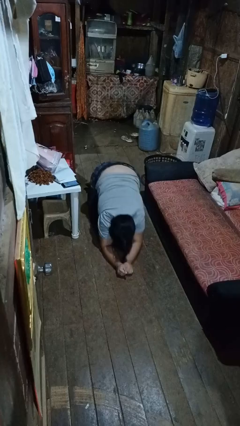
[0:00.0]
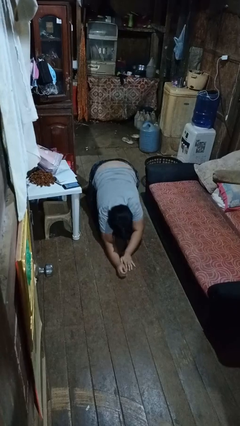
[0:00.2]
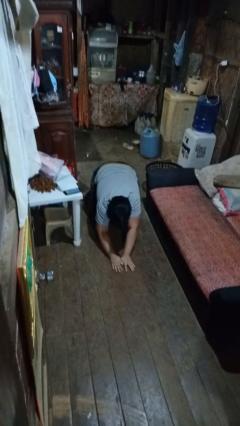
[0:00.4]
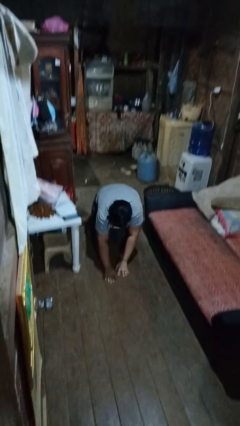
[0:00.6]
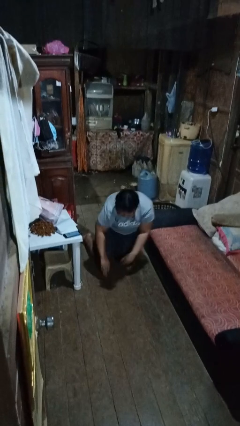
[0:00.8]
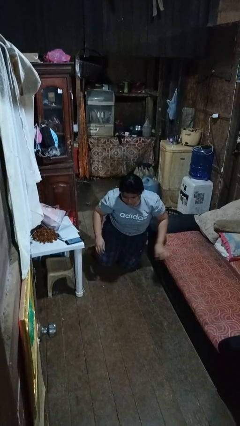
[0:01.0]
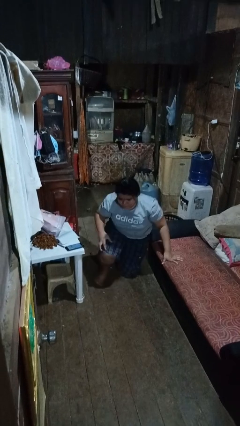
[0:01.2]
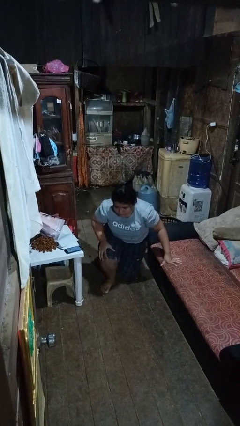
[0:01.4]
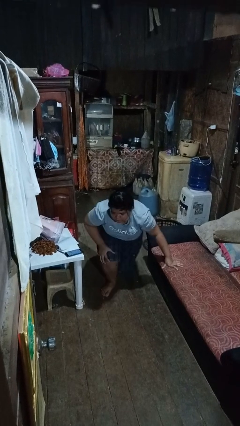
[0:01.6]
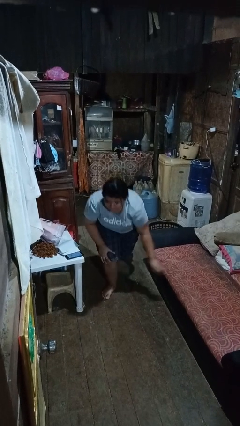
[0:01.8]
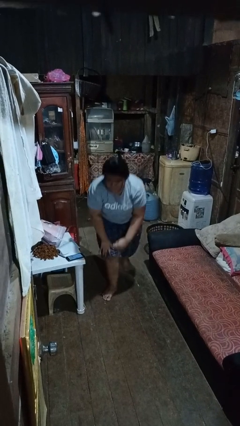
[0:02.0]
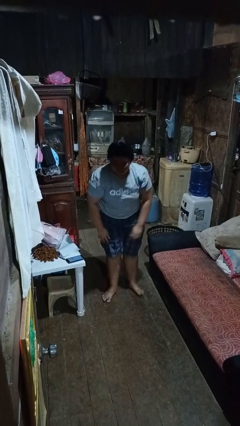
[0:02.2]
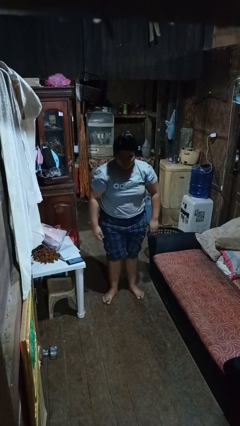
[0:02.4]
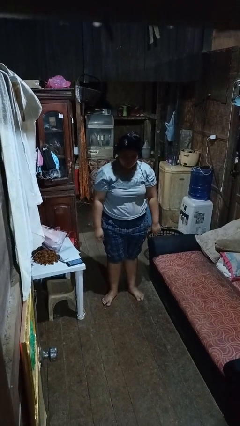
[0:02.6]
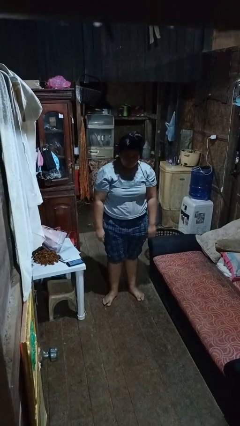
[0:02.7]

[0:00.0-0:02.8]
person stands up from floor

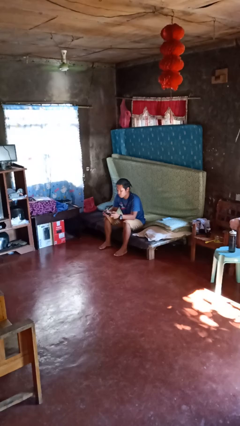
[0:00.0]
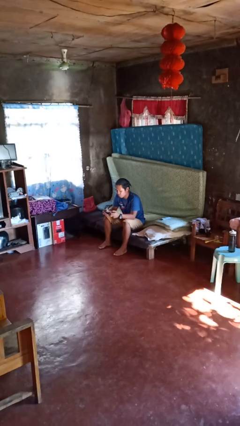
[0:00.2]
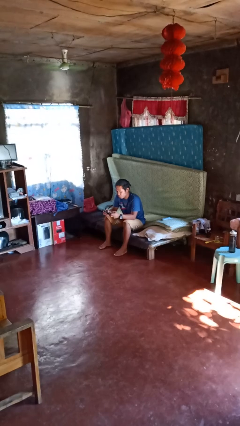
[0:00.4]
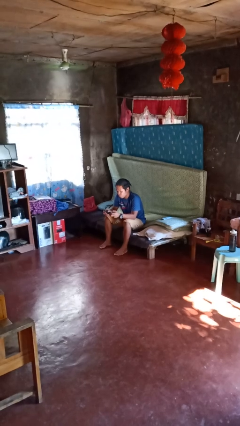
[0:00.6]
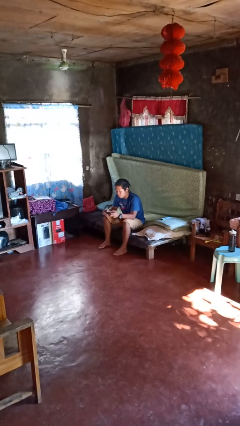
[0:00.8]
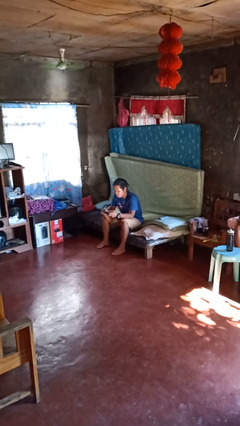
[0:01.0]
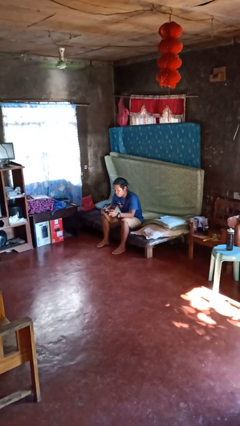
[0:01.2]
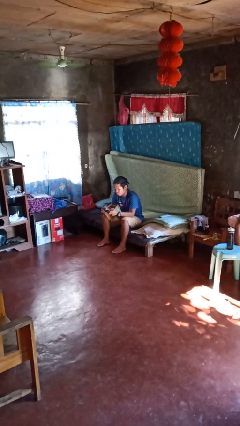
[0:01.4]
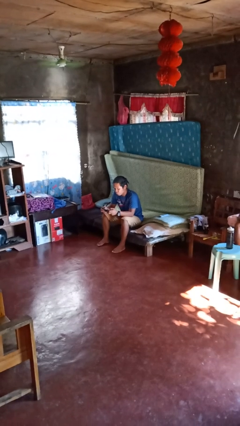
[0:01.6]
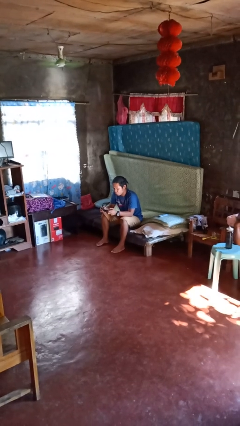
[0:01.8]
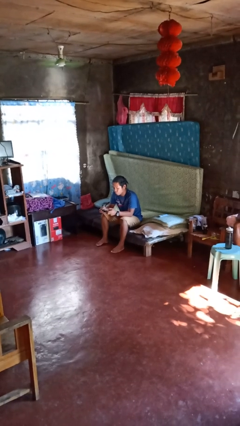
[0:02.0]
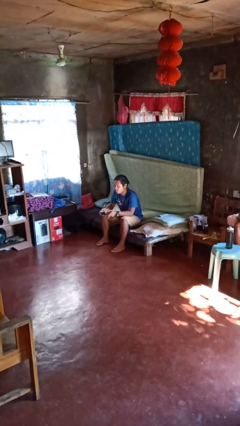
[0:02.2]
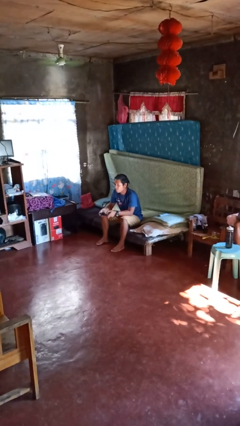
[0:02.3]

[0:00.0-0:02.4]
person interacts with handheld game

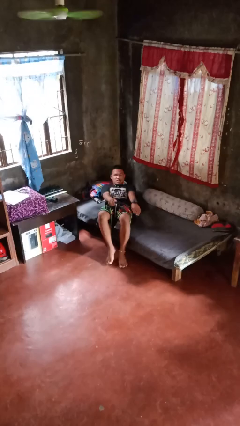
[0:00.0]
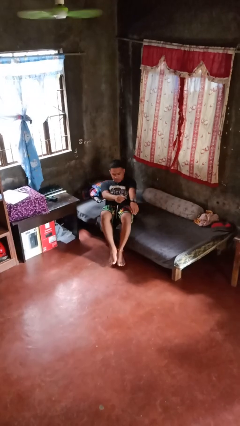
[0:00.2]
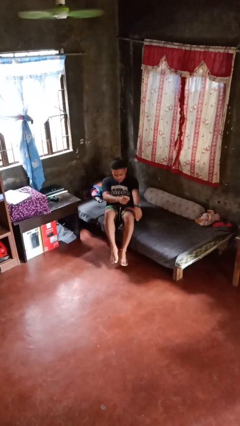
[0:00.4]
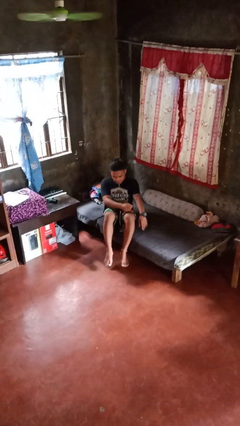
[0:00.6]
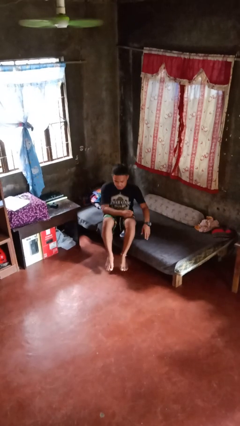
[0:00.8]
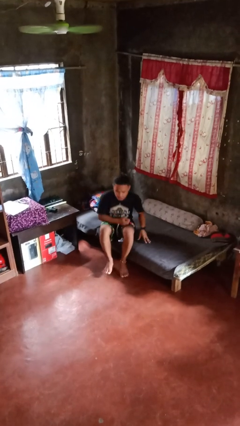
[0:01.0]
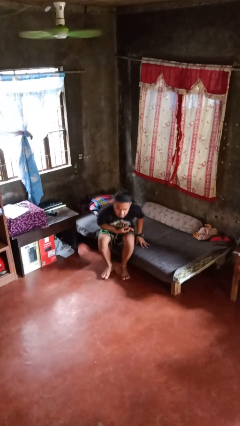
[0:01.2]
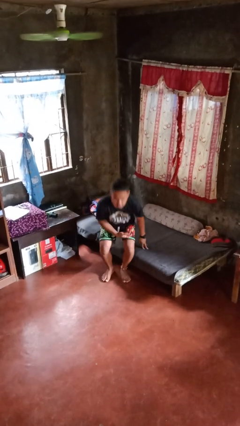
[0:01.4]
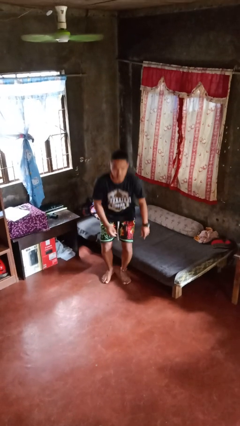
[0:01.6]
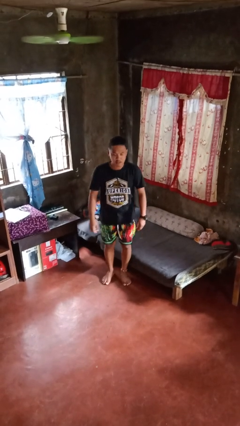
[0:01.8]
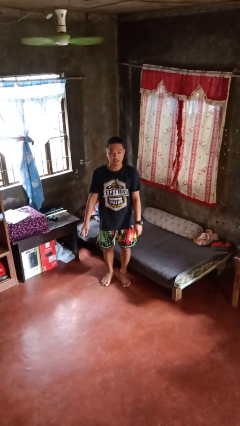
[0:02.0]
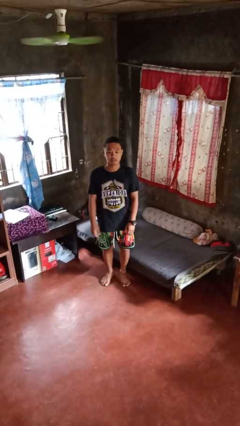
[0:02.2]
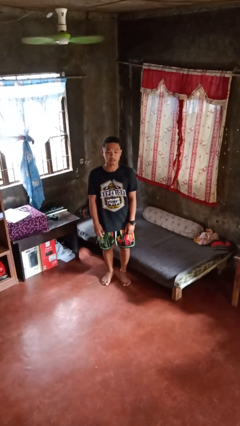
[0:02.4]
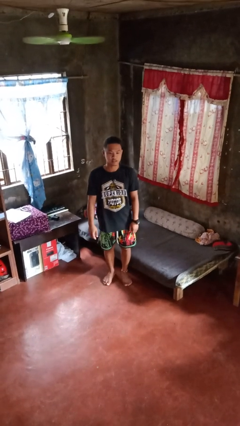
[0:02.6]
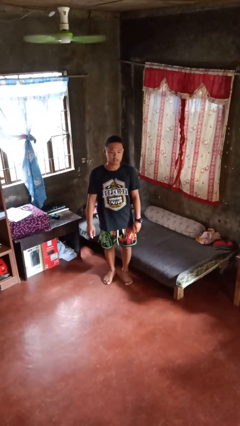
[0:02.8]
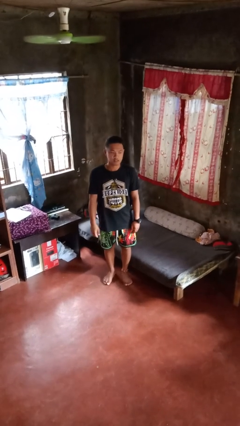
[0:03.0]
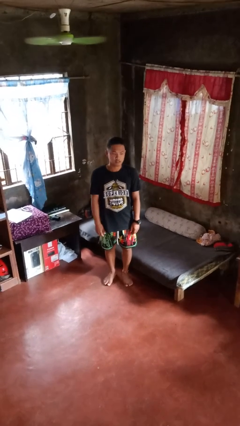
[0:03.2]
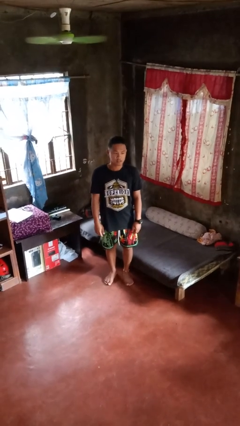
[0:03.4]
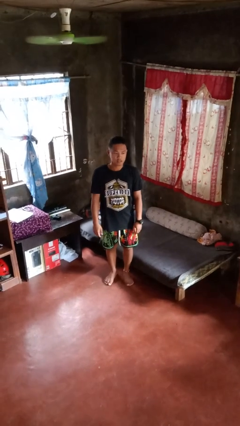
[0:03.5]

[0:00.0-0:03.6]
person stands up

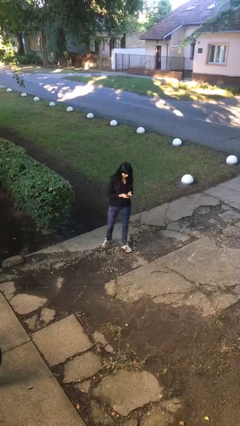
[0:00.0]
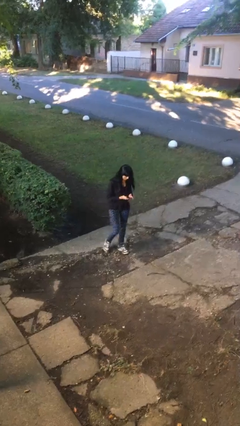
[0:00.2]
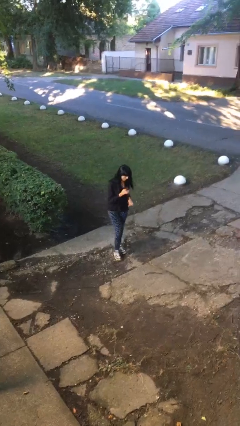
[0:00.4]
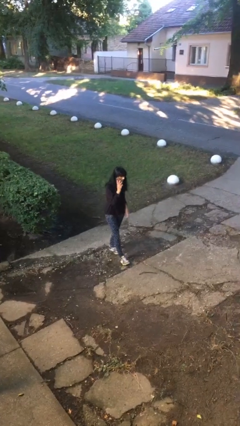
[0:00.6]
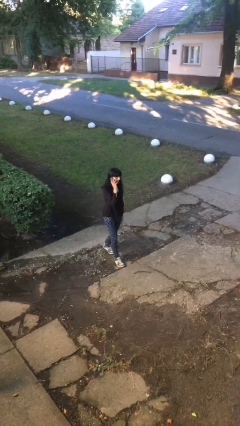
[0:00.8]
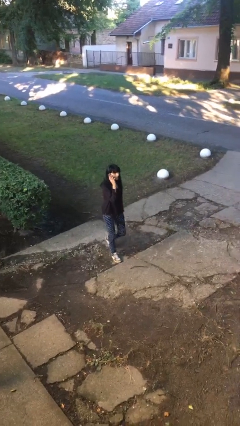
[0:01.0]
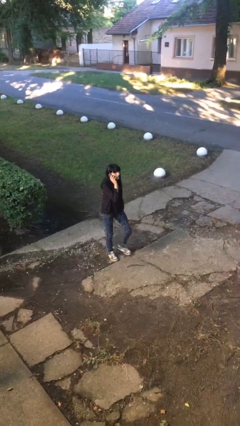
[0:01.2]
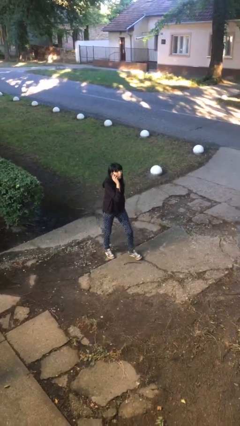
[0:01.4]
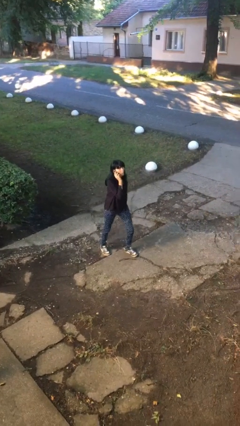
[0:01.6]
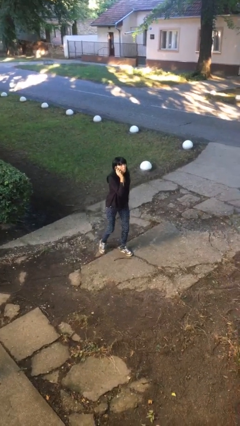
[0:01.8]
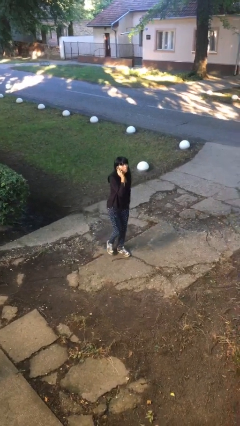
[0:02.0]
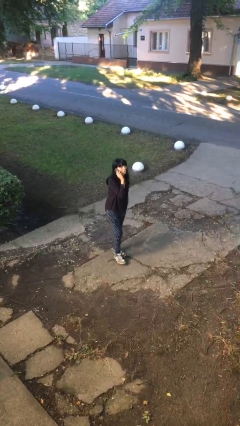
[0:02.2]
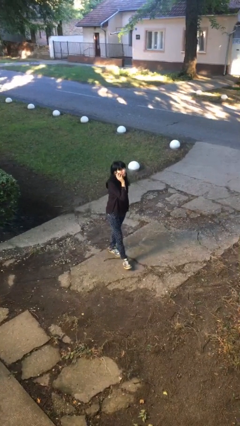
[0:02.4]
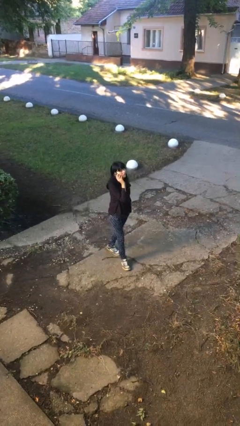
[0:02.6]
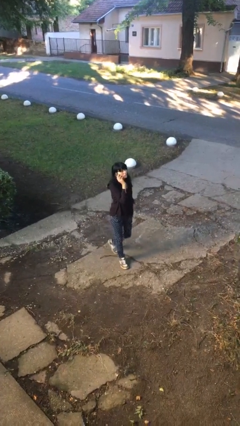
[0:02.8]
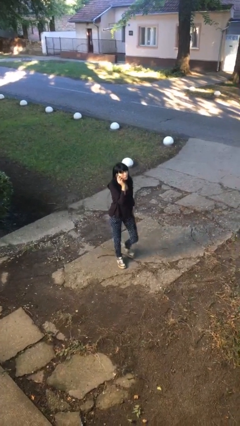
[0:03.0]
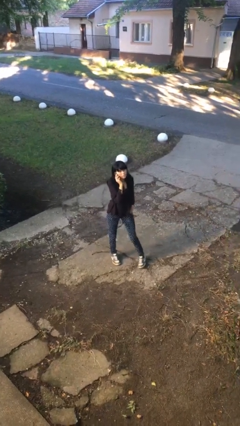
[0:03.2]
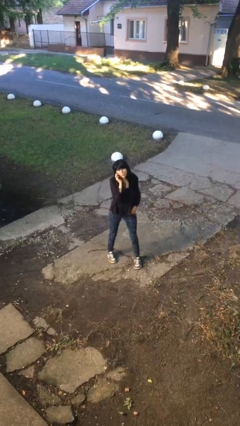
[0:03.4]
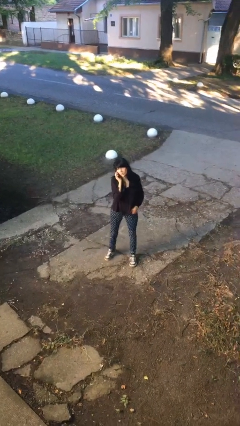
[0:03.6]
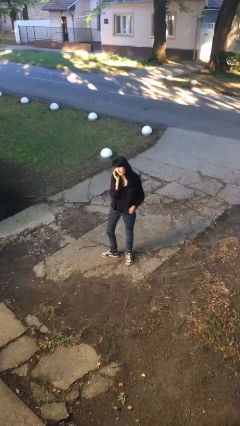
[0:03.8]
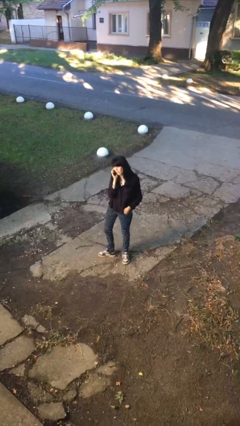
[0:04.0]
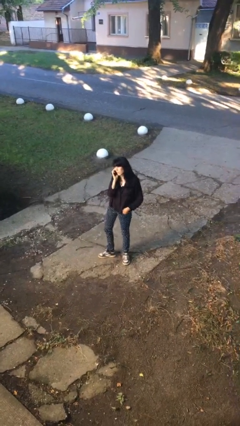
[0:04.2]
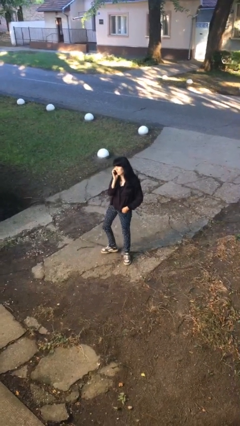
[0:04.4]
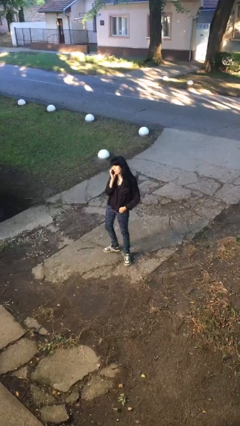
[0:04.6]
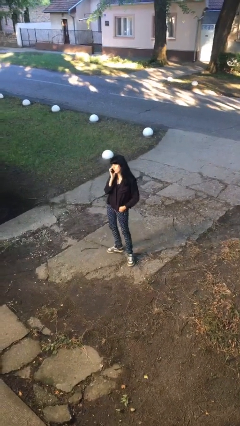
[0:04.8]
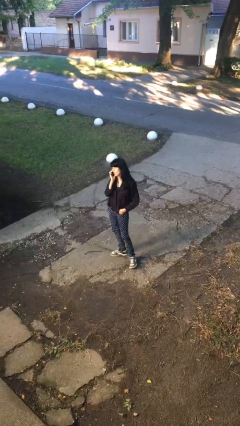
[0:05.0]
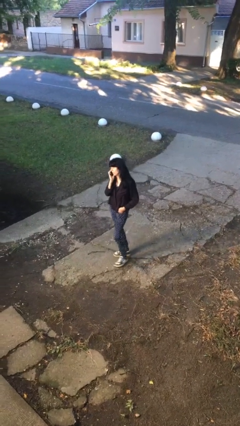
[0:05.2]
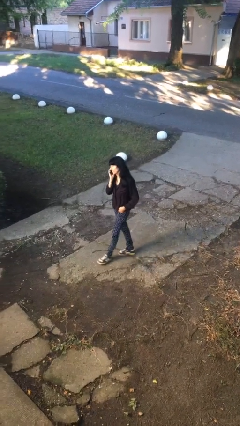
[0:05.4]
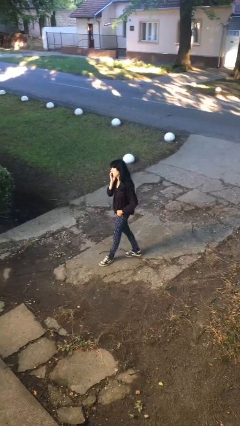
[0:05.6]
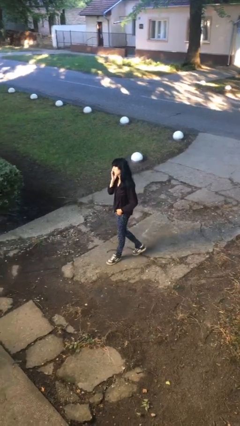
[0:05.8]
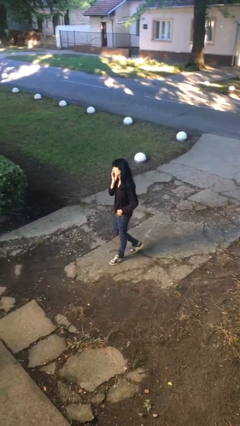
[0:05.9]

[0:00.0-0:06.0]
person talks on phone

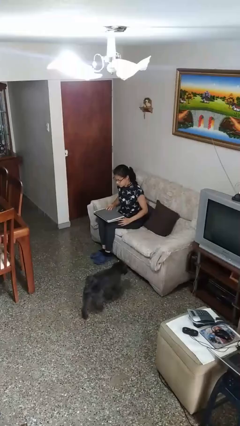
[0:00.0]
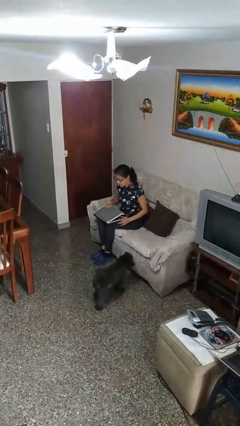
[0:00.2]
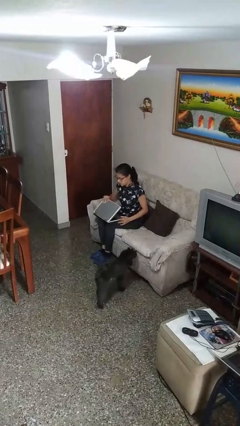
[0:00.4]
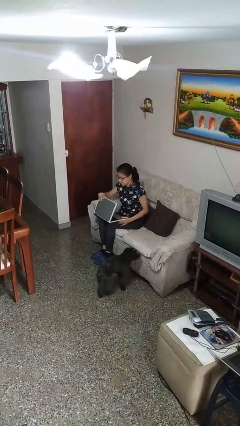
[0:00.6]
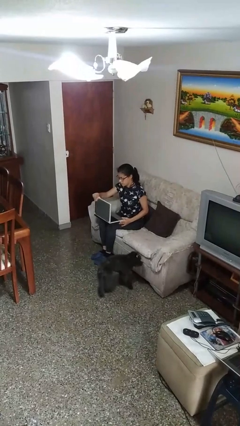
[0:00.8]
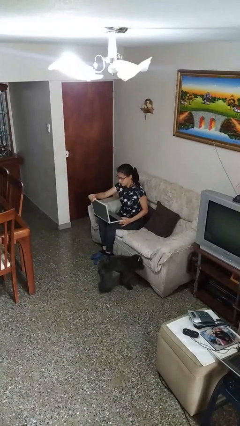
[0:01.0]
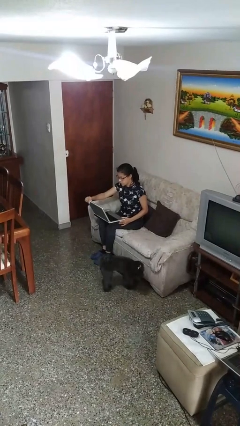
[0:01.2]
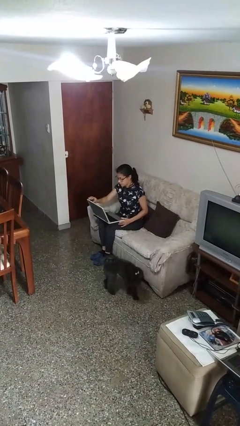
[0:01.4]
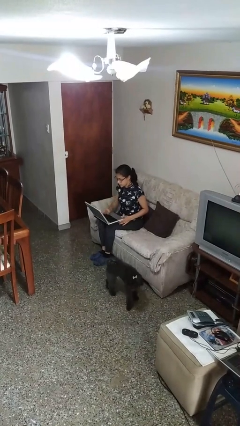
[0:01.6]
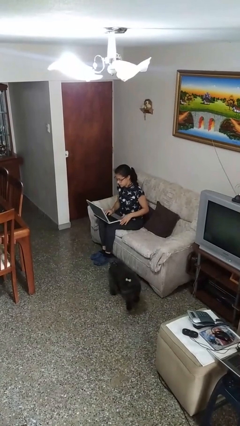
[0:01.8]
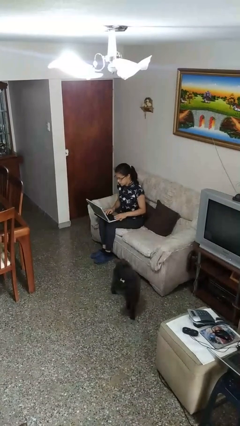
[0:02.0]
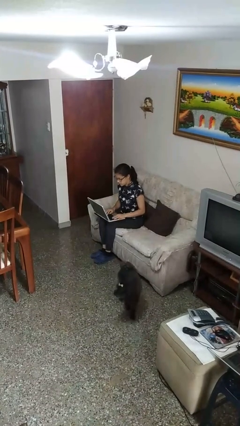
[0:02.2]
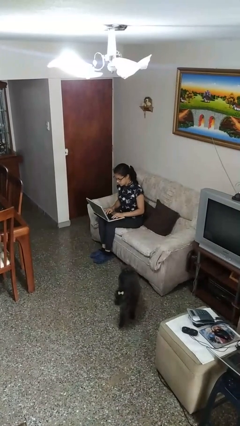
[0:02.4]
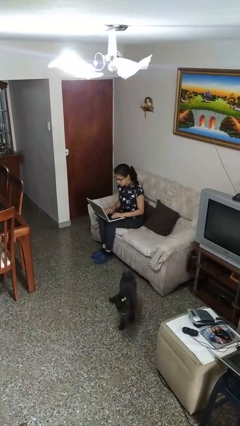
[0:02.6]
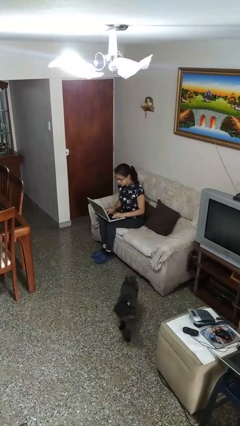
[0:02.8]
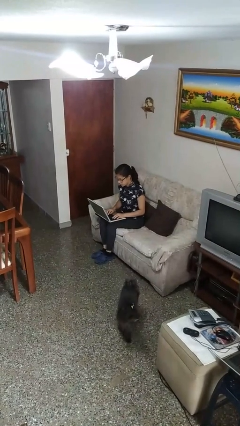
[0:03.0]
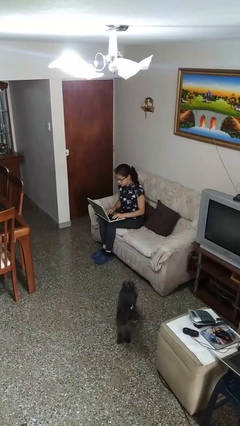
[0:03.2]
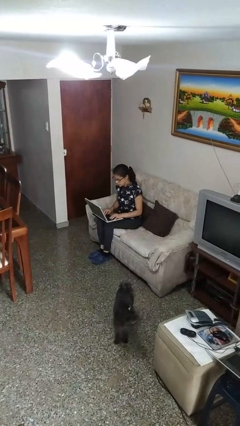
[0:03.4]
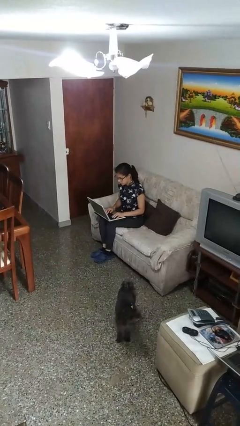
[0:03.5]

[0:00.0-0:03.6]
person opens laptop
